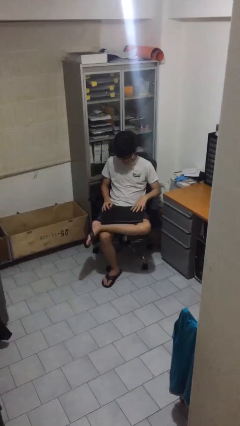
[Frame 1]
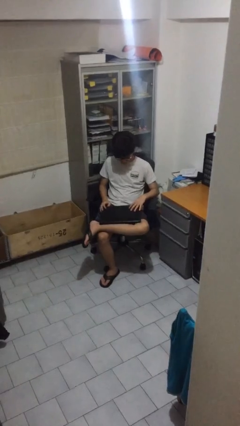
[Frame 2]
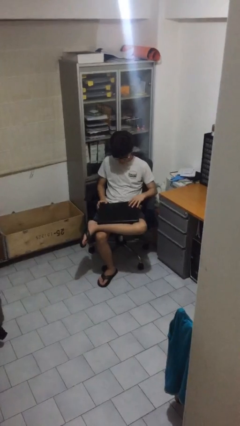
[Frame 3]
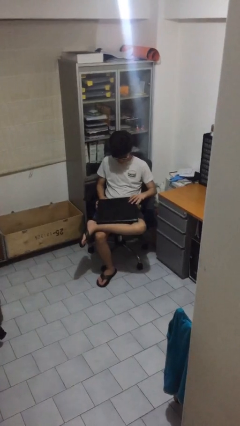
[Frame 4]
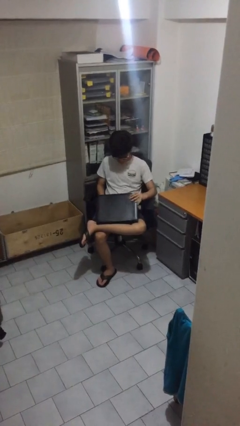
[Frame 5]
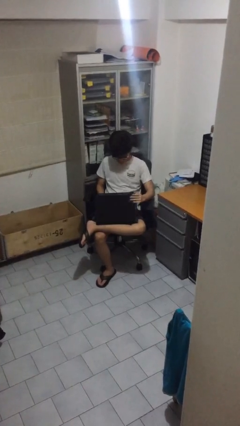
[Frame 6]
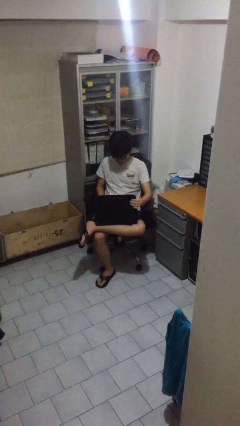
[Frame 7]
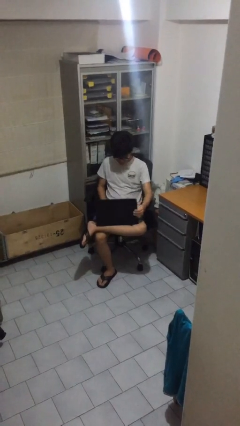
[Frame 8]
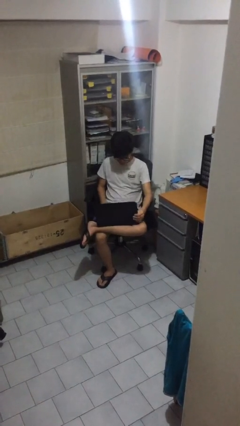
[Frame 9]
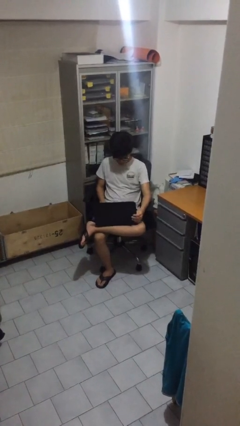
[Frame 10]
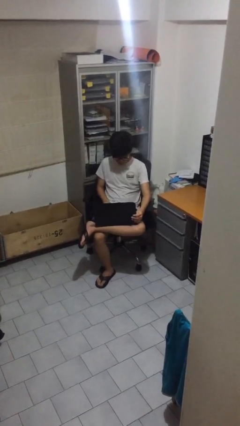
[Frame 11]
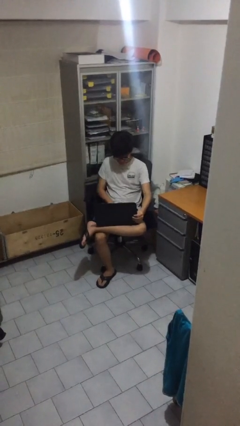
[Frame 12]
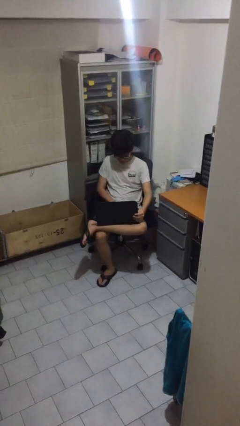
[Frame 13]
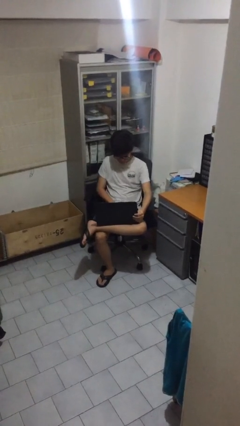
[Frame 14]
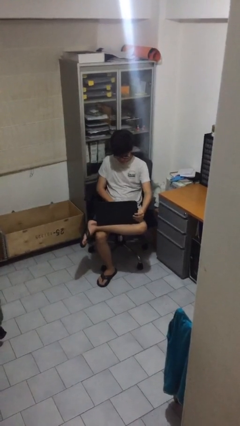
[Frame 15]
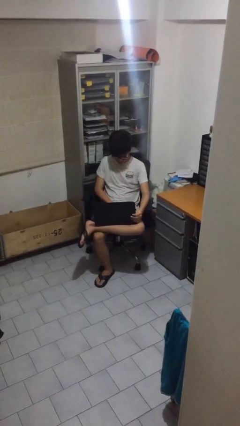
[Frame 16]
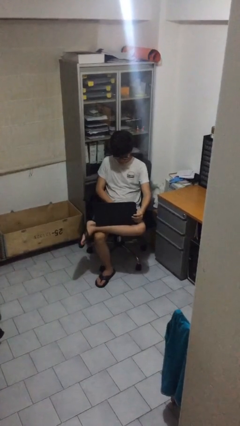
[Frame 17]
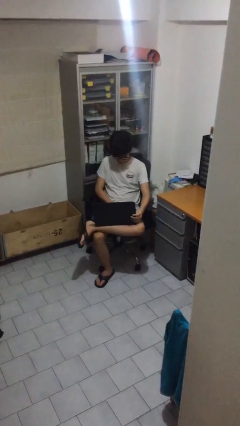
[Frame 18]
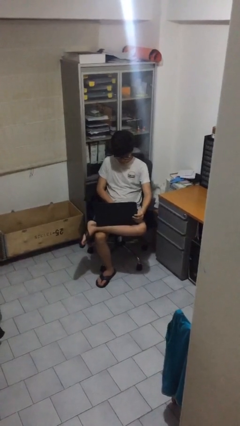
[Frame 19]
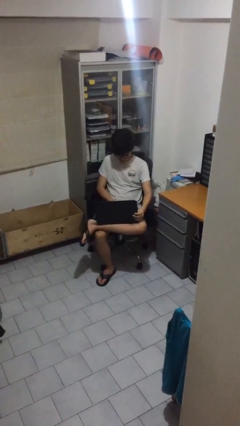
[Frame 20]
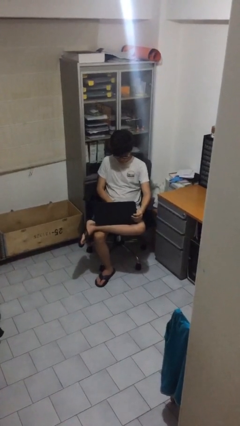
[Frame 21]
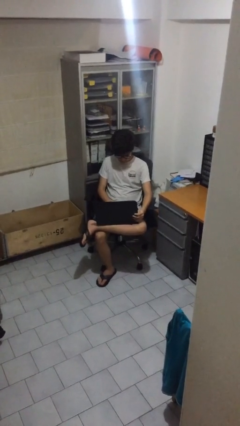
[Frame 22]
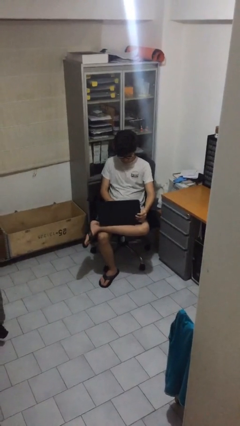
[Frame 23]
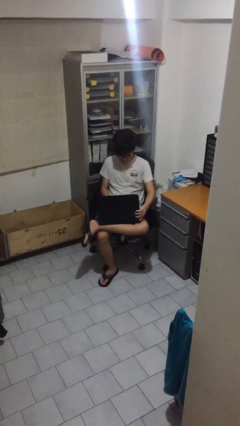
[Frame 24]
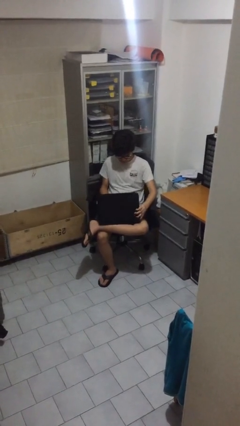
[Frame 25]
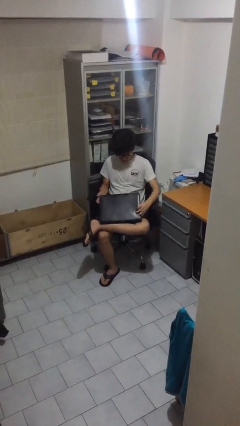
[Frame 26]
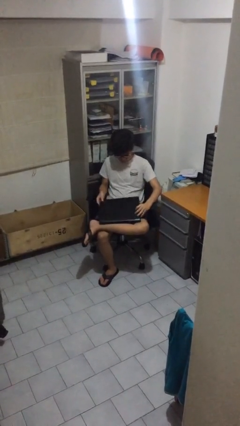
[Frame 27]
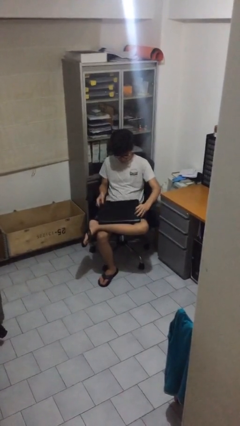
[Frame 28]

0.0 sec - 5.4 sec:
person interacts with laptop

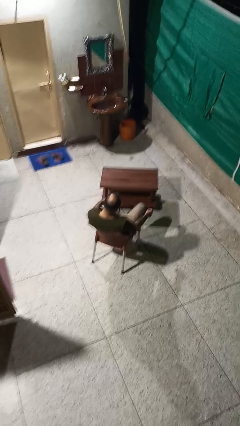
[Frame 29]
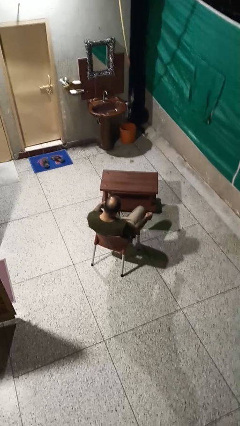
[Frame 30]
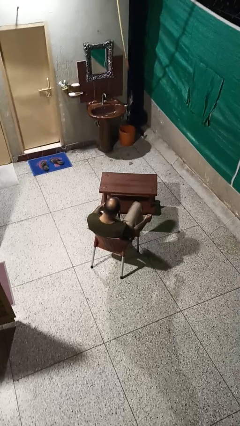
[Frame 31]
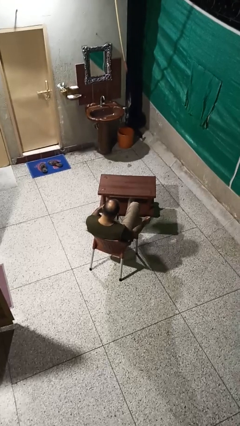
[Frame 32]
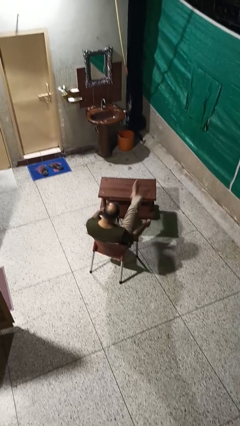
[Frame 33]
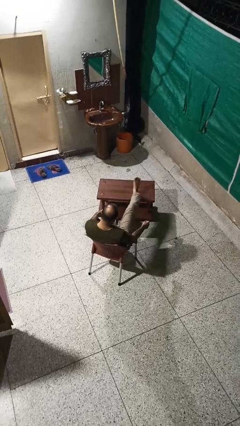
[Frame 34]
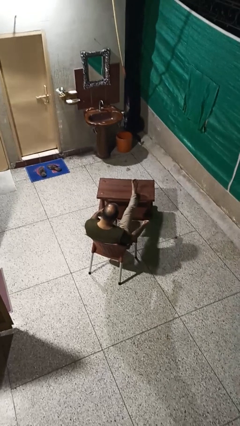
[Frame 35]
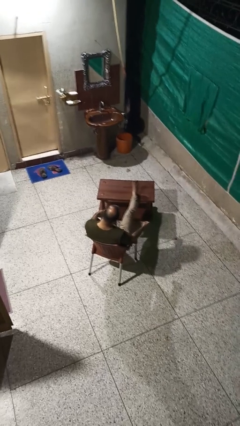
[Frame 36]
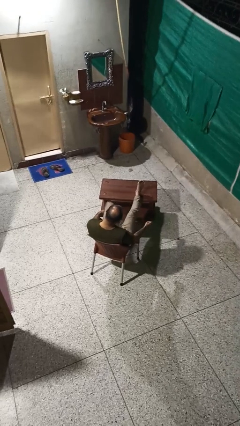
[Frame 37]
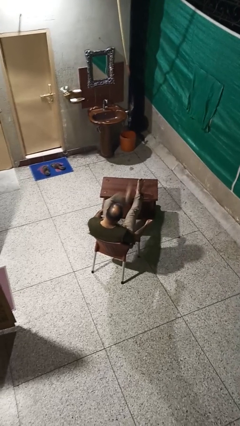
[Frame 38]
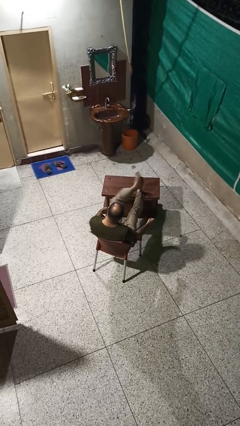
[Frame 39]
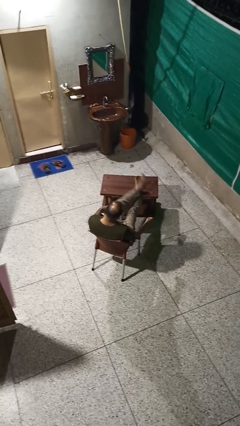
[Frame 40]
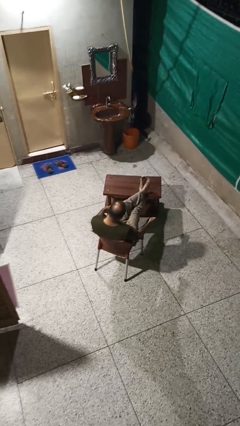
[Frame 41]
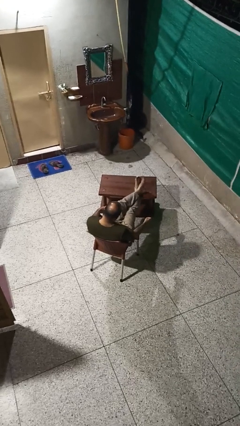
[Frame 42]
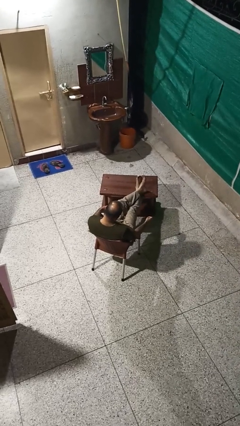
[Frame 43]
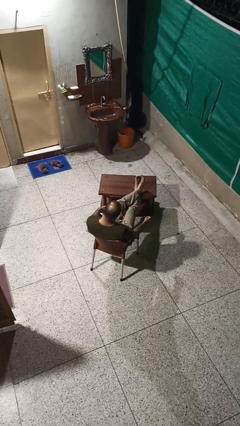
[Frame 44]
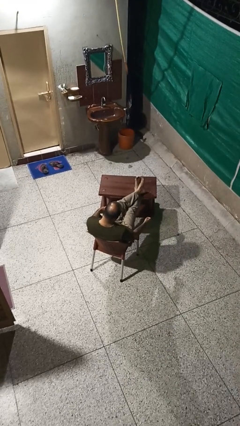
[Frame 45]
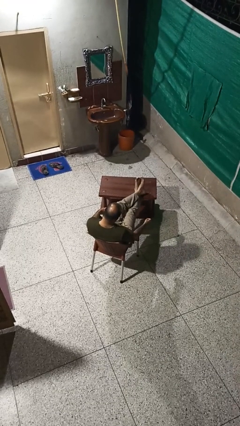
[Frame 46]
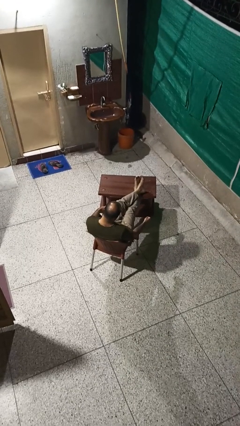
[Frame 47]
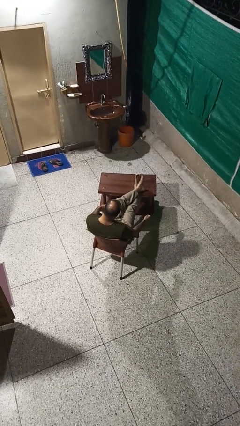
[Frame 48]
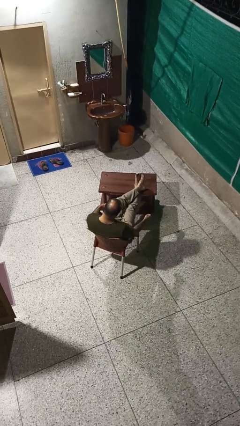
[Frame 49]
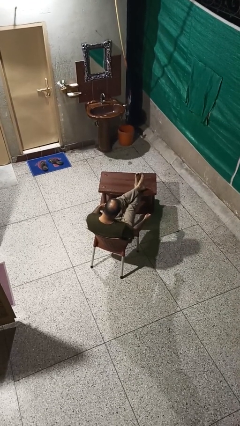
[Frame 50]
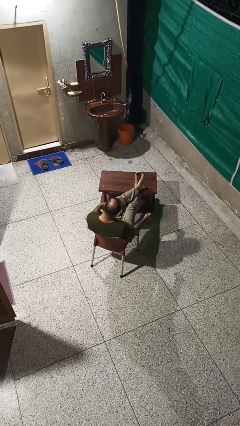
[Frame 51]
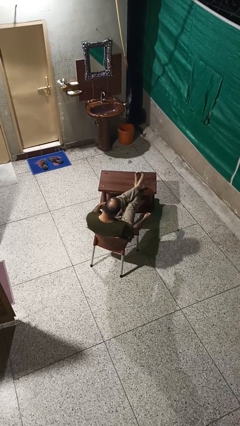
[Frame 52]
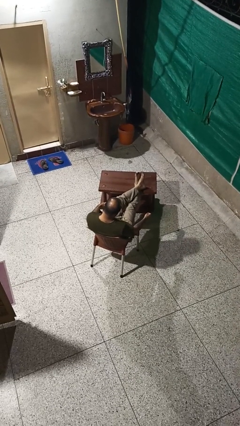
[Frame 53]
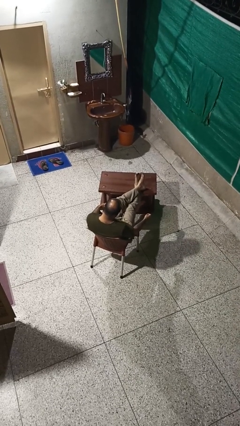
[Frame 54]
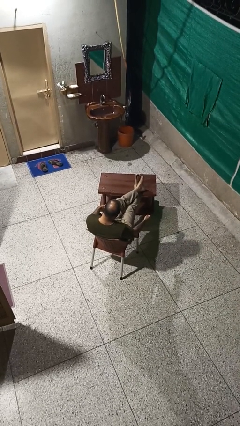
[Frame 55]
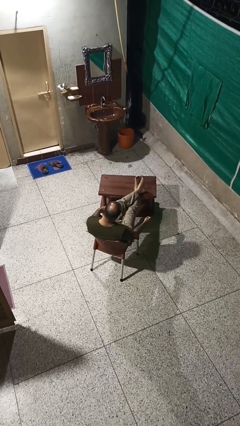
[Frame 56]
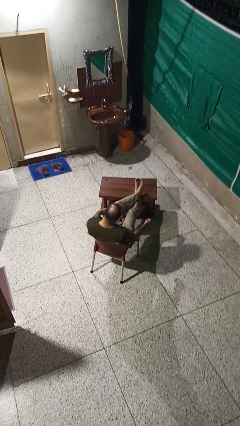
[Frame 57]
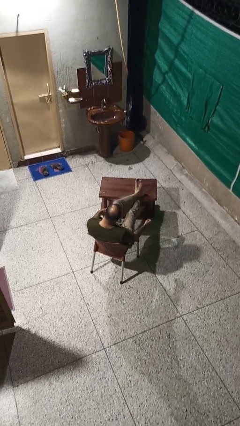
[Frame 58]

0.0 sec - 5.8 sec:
person puts feet up

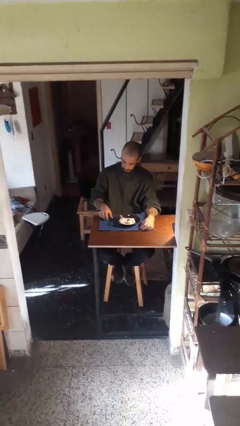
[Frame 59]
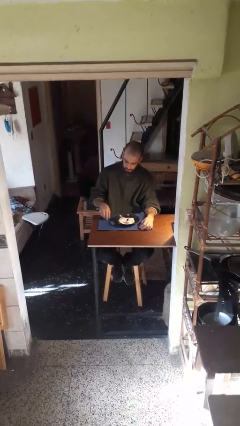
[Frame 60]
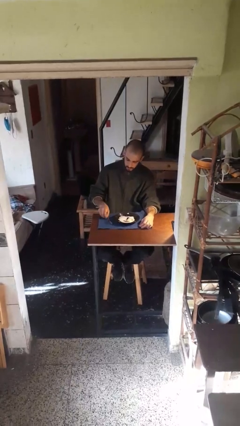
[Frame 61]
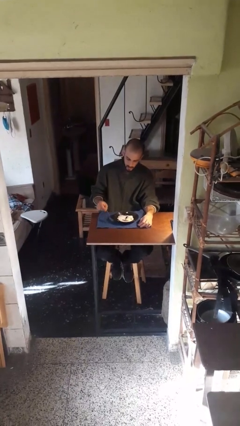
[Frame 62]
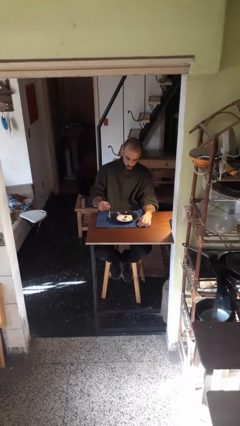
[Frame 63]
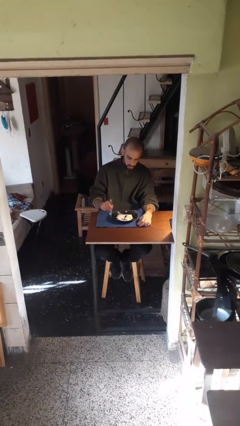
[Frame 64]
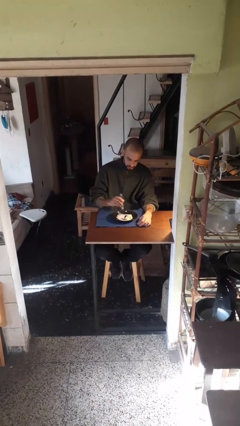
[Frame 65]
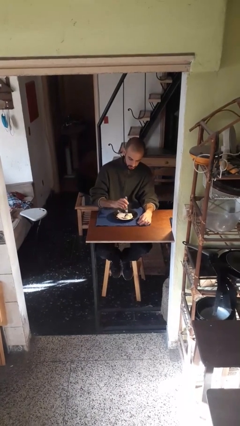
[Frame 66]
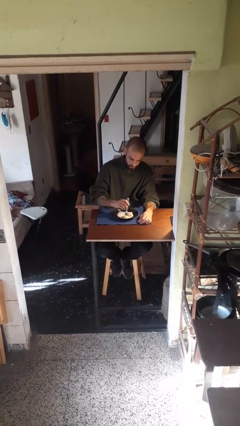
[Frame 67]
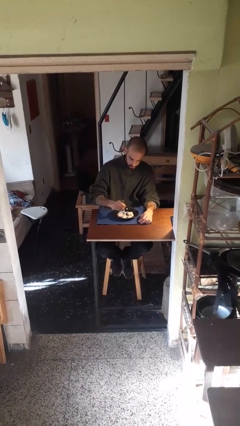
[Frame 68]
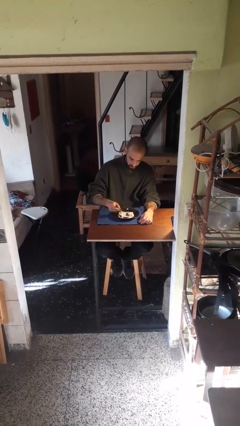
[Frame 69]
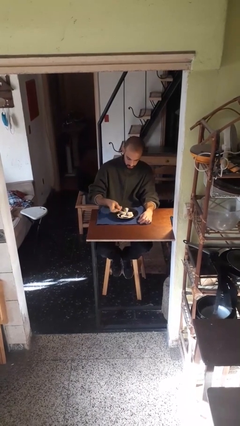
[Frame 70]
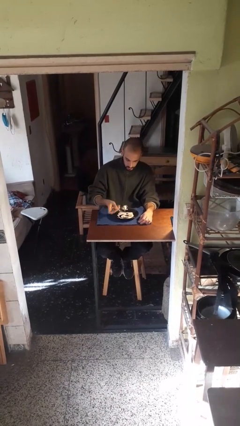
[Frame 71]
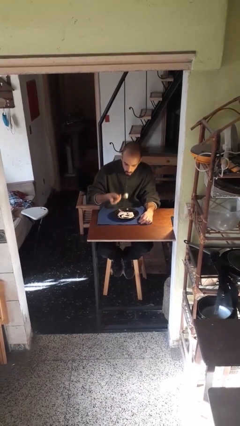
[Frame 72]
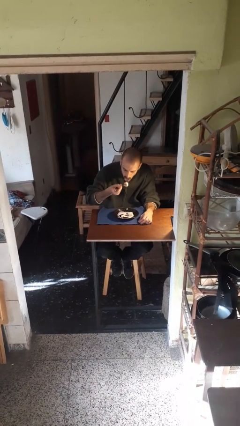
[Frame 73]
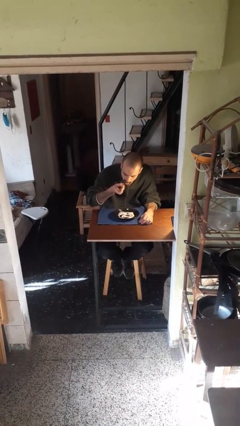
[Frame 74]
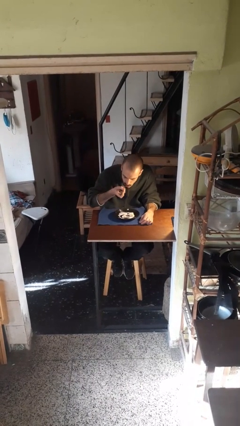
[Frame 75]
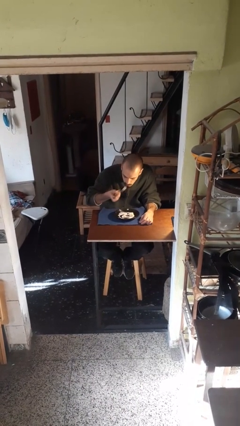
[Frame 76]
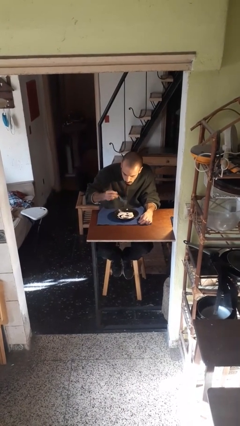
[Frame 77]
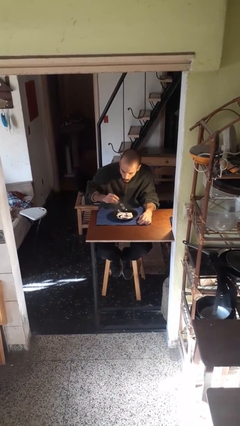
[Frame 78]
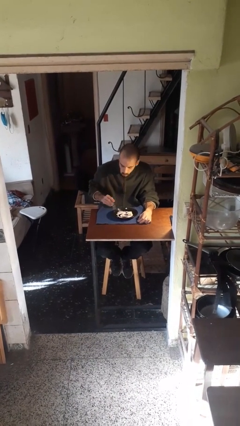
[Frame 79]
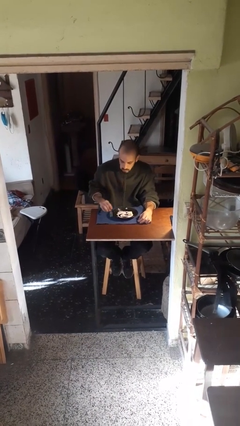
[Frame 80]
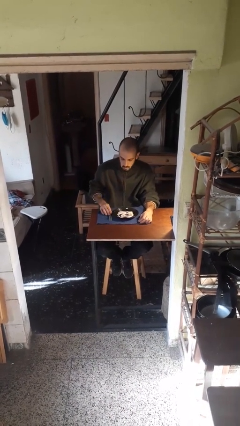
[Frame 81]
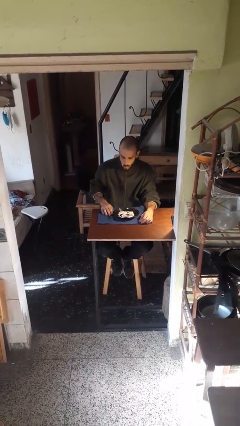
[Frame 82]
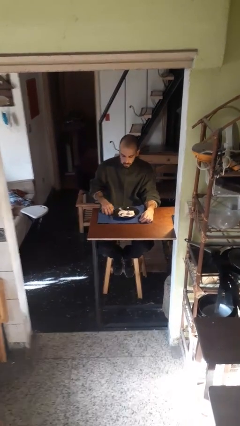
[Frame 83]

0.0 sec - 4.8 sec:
person eats with utensil

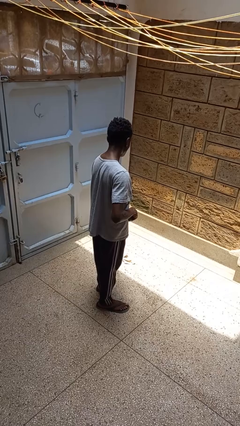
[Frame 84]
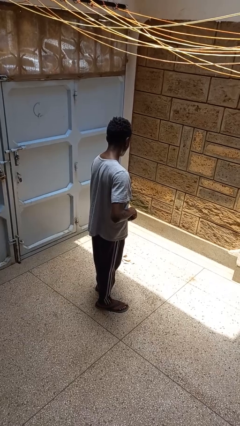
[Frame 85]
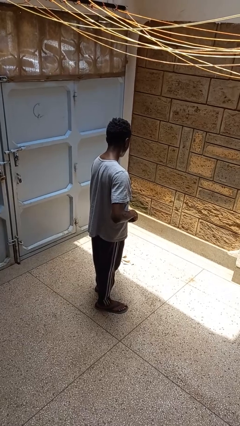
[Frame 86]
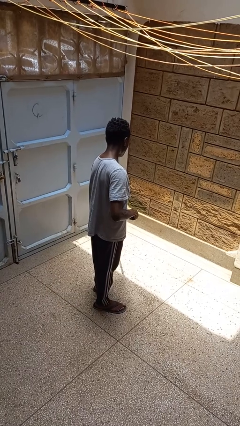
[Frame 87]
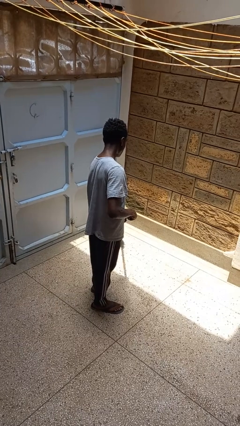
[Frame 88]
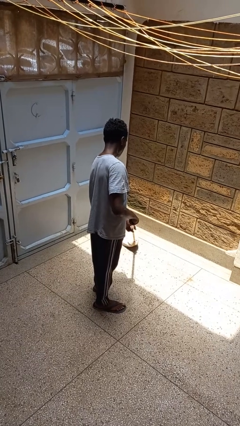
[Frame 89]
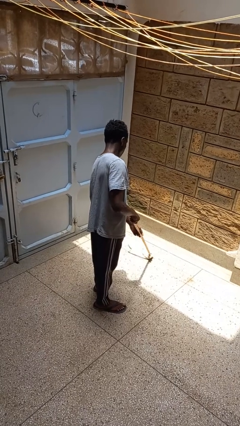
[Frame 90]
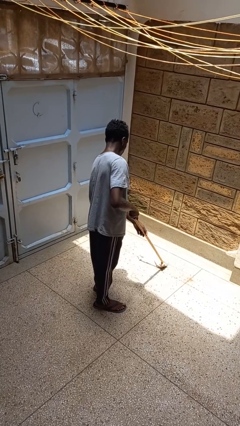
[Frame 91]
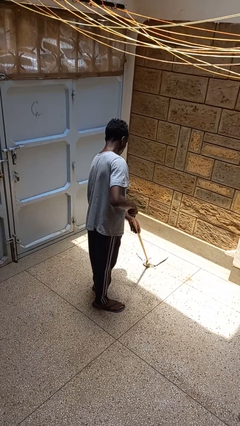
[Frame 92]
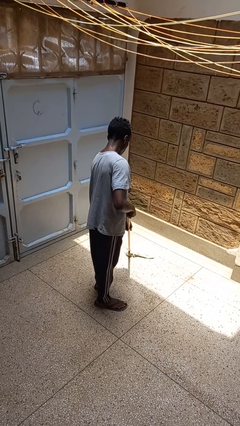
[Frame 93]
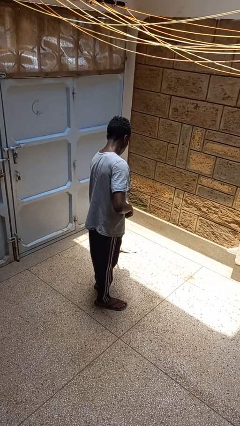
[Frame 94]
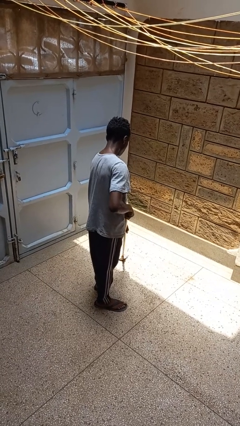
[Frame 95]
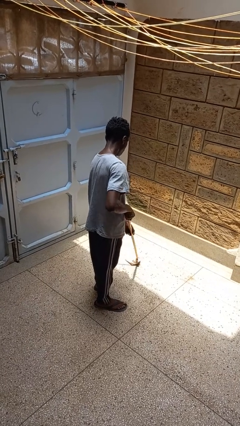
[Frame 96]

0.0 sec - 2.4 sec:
person mops
